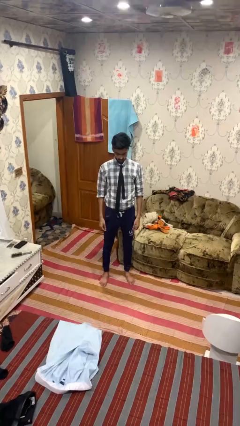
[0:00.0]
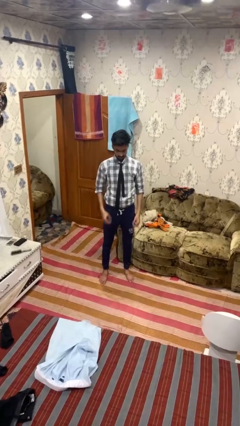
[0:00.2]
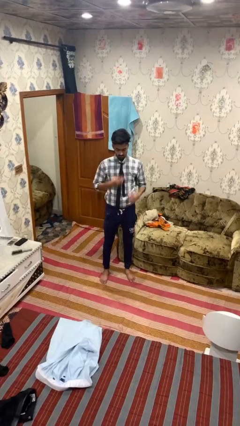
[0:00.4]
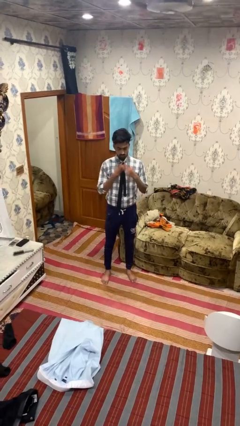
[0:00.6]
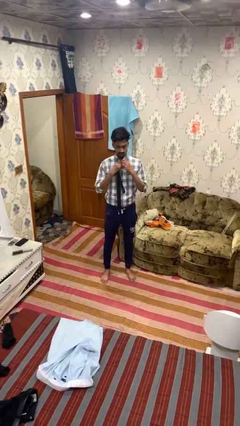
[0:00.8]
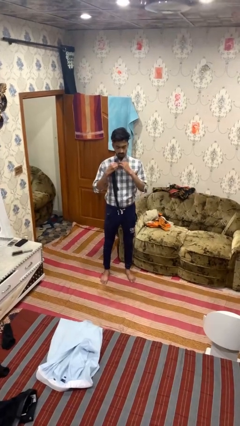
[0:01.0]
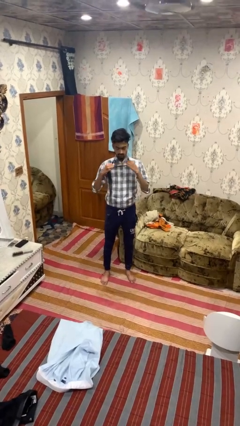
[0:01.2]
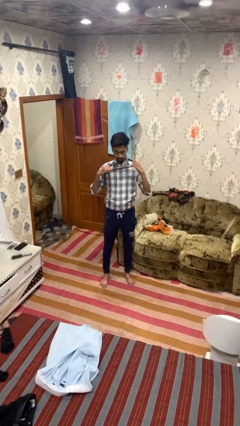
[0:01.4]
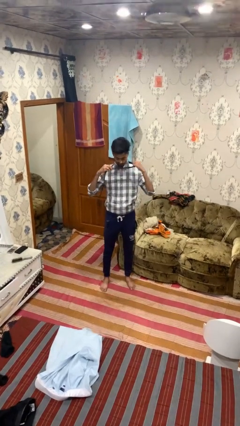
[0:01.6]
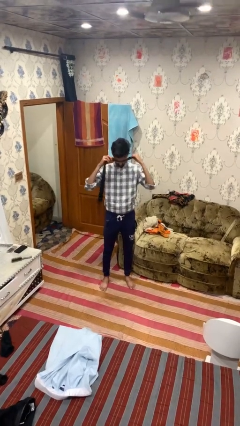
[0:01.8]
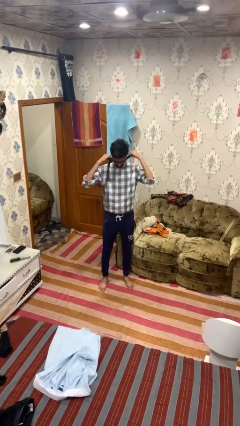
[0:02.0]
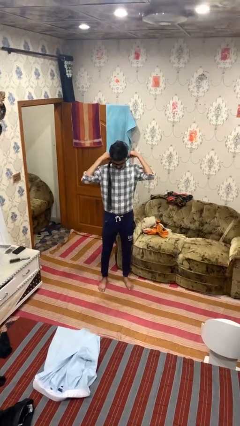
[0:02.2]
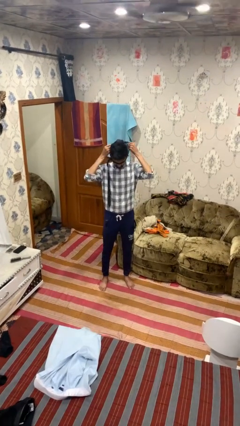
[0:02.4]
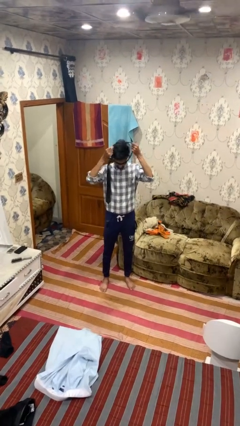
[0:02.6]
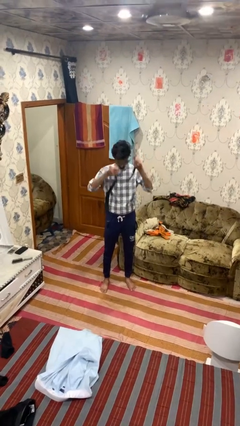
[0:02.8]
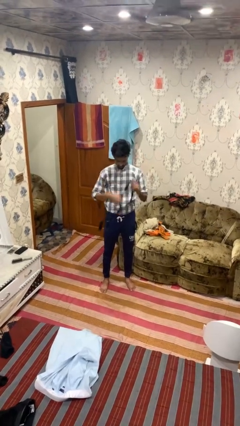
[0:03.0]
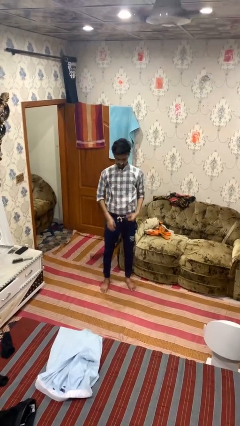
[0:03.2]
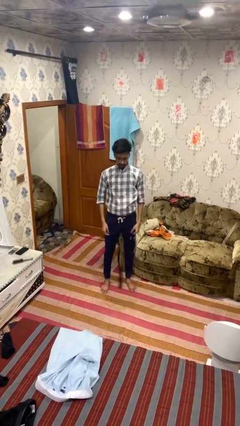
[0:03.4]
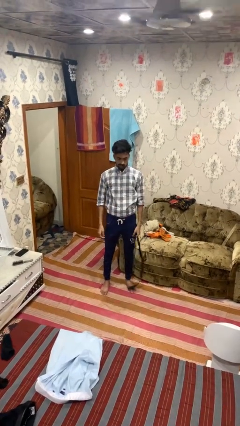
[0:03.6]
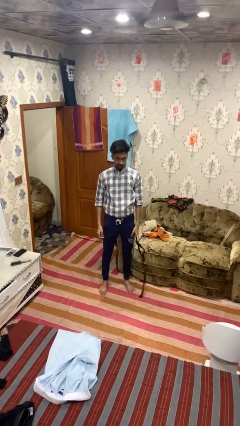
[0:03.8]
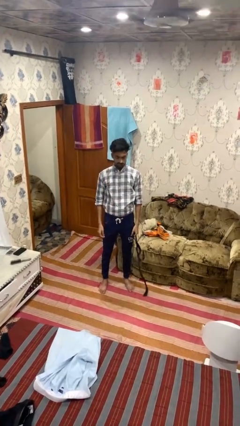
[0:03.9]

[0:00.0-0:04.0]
person takes off necktie

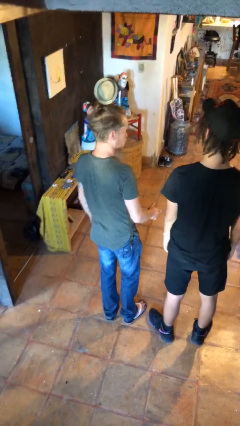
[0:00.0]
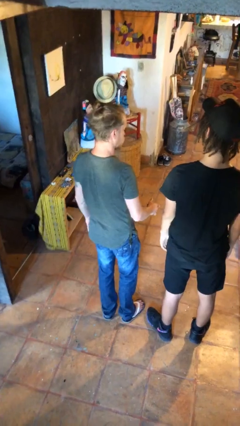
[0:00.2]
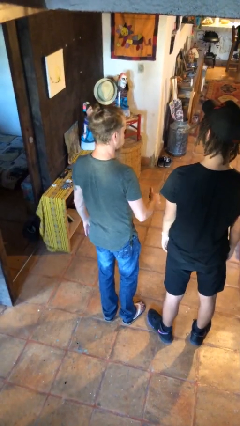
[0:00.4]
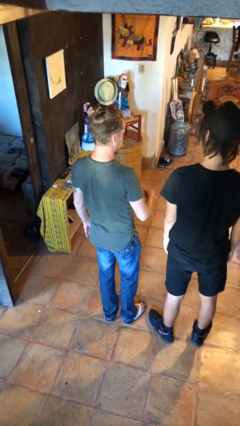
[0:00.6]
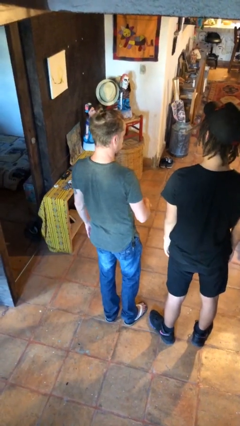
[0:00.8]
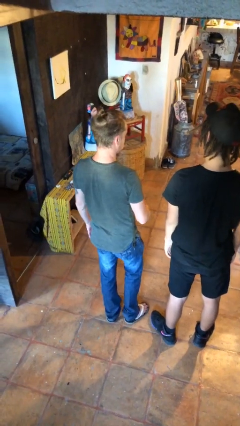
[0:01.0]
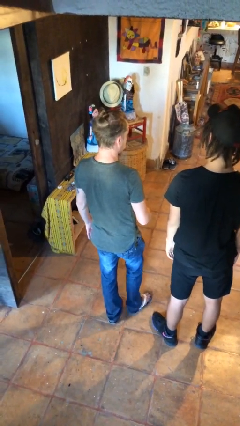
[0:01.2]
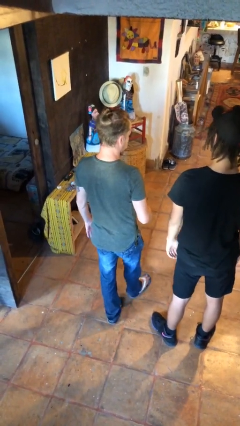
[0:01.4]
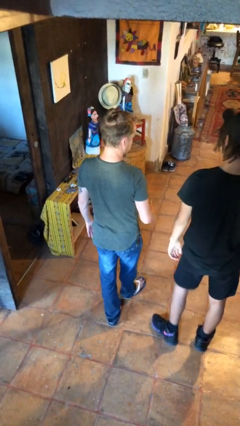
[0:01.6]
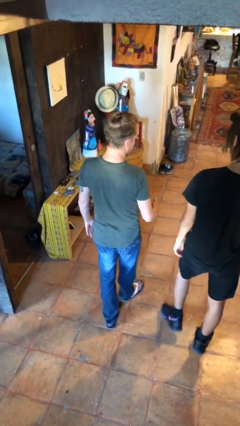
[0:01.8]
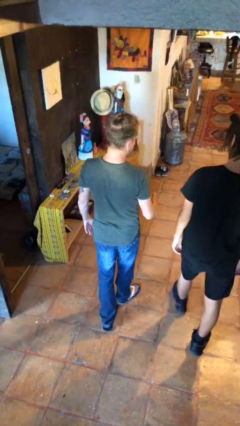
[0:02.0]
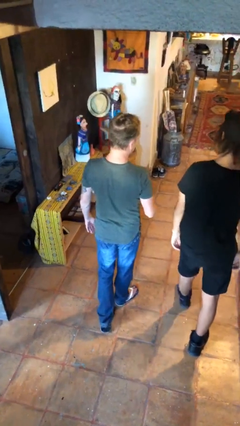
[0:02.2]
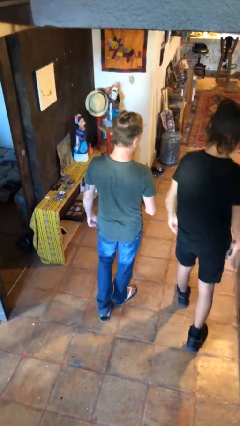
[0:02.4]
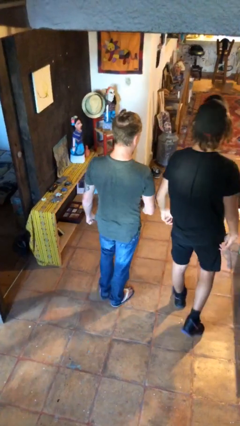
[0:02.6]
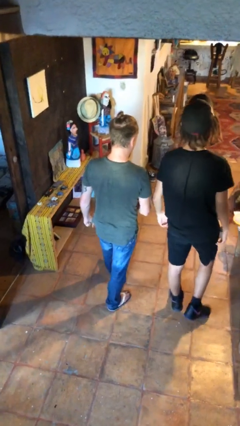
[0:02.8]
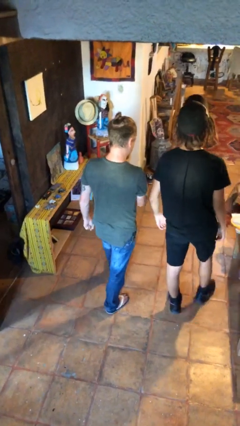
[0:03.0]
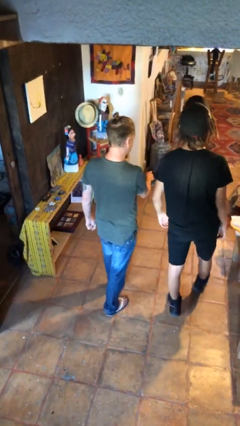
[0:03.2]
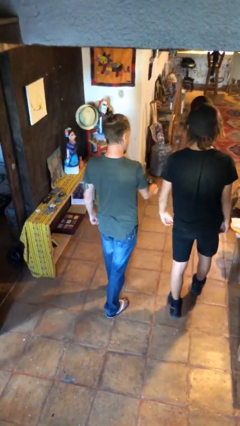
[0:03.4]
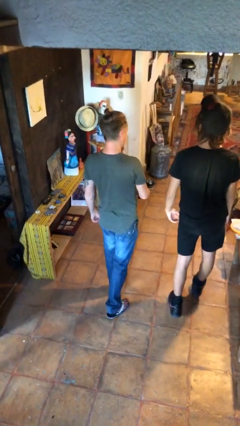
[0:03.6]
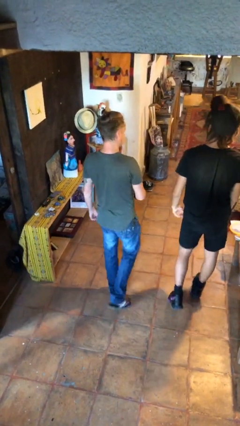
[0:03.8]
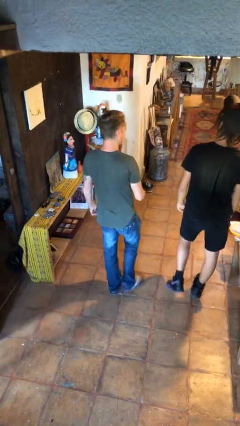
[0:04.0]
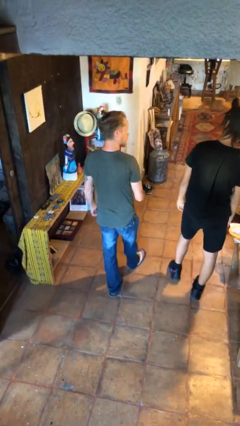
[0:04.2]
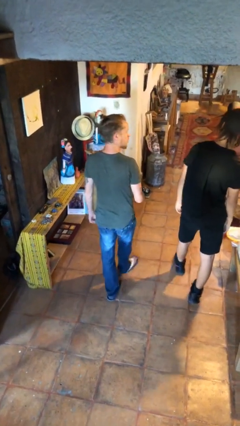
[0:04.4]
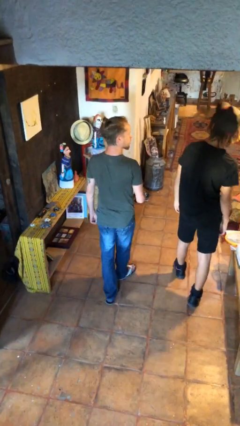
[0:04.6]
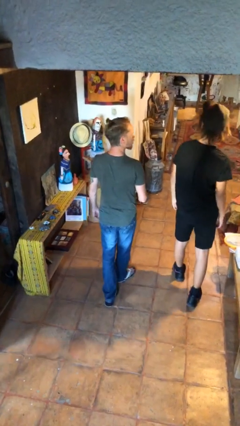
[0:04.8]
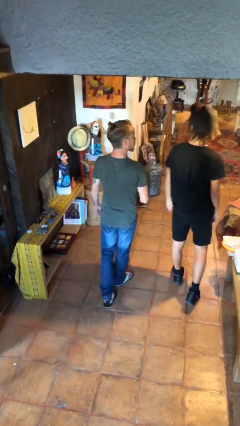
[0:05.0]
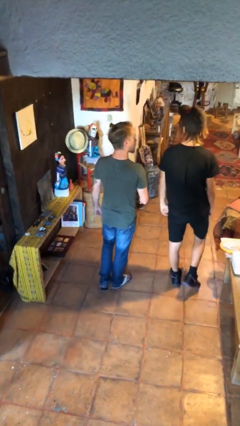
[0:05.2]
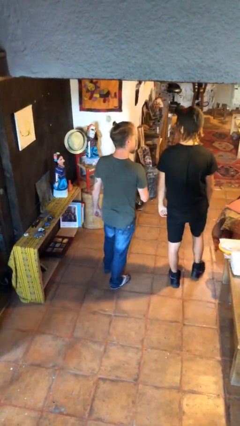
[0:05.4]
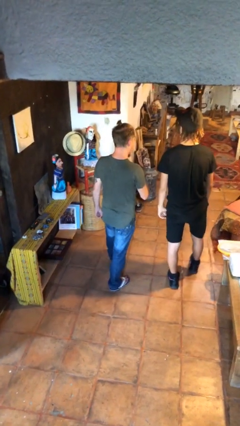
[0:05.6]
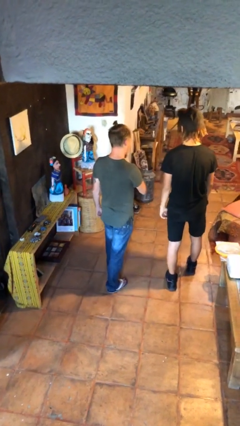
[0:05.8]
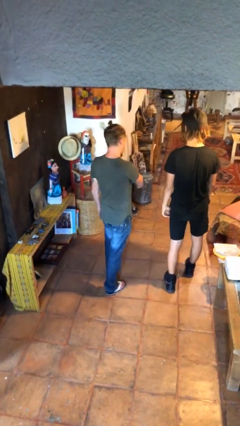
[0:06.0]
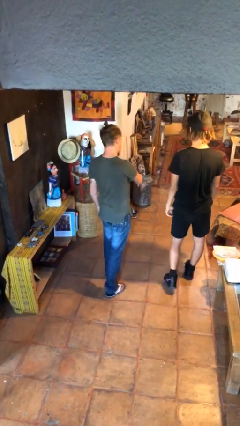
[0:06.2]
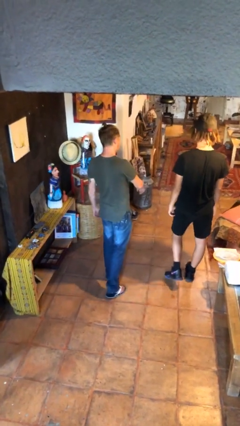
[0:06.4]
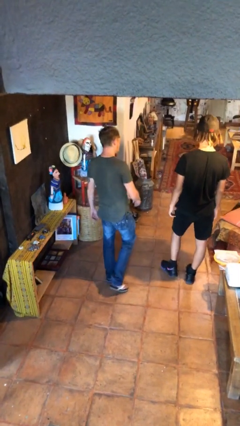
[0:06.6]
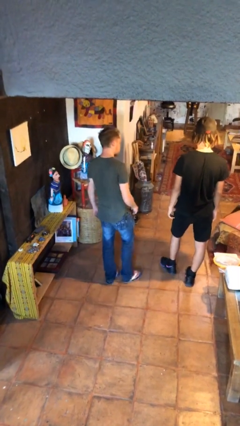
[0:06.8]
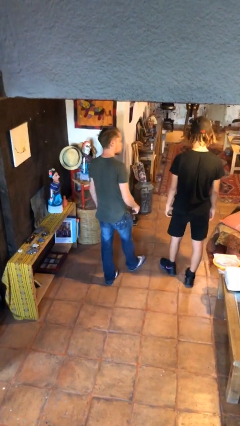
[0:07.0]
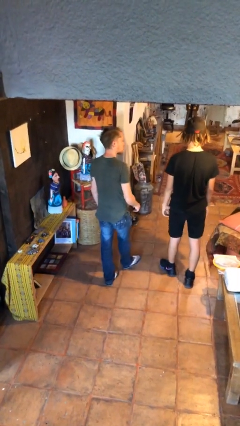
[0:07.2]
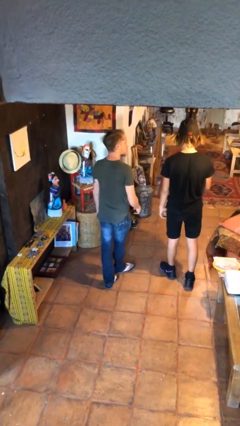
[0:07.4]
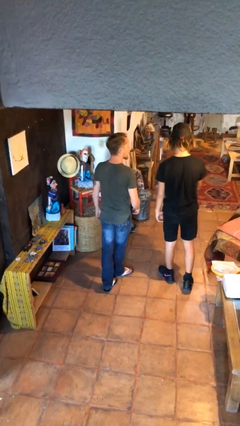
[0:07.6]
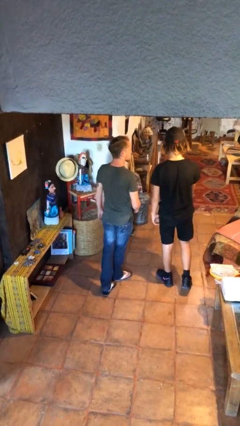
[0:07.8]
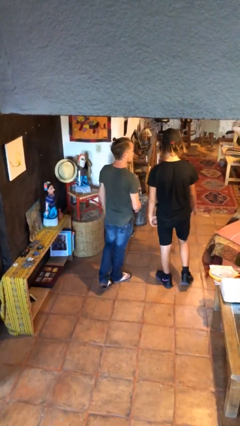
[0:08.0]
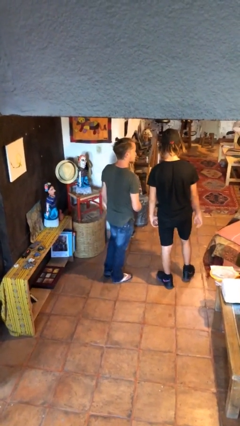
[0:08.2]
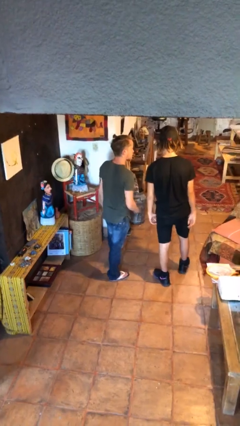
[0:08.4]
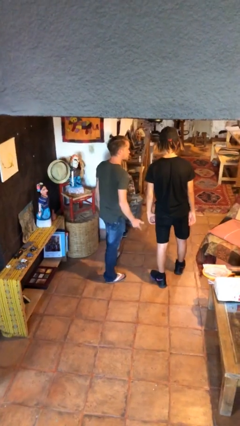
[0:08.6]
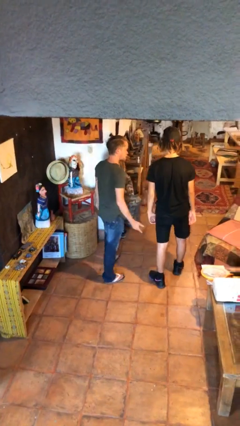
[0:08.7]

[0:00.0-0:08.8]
person talks to person

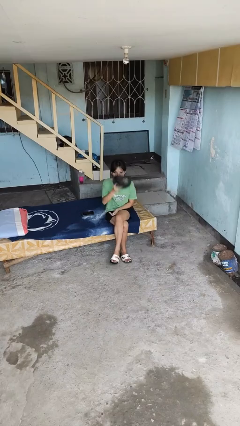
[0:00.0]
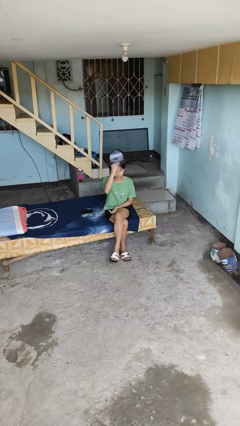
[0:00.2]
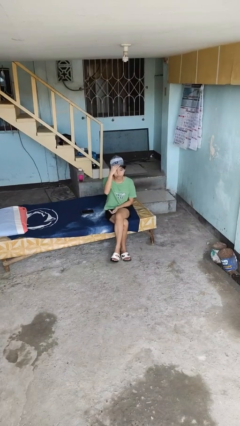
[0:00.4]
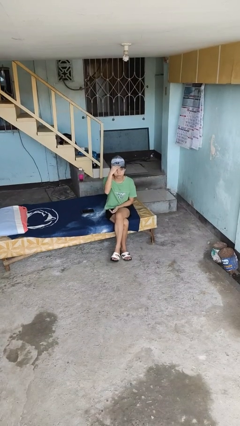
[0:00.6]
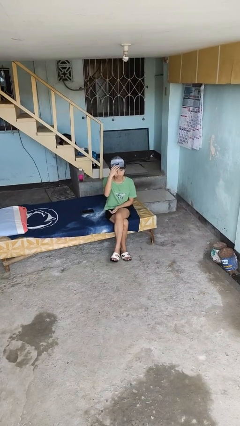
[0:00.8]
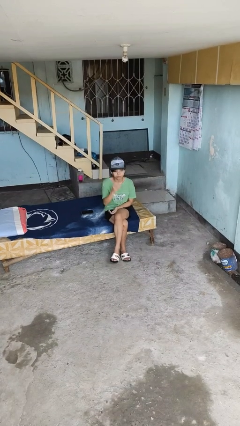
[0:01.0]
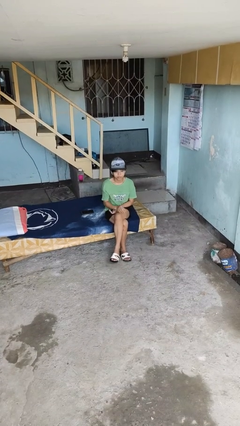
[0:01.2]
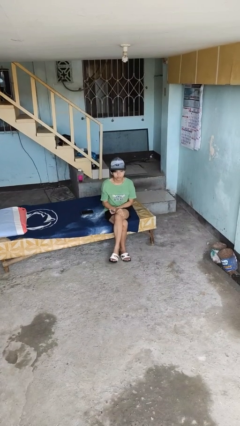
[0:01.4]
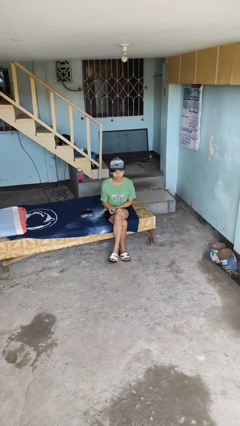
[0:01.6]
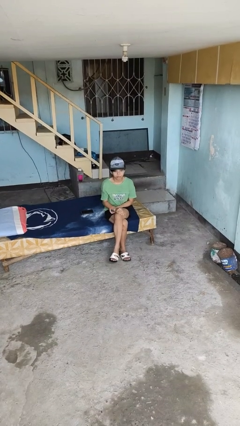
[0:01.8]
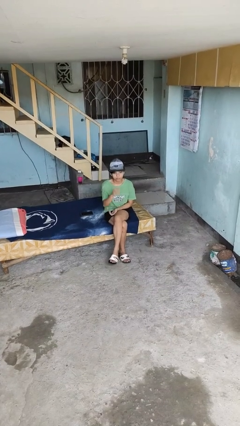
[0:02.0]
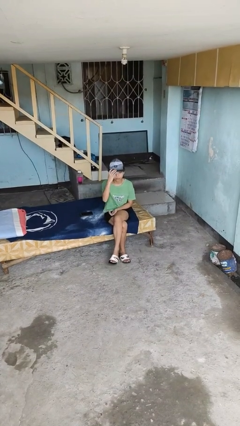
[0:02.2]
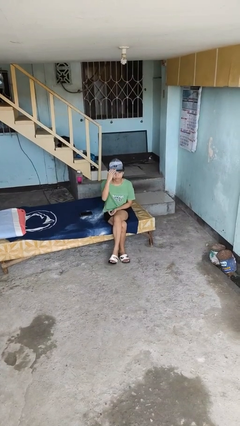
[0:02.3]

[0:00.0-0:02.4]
person puts on hat

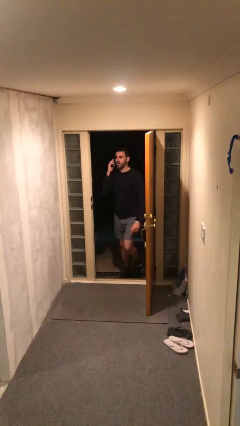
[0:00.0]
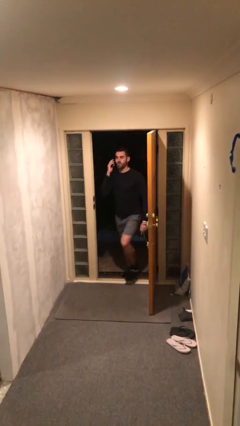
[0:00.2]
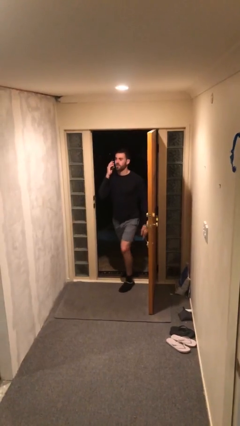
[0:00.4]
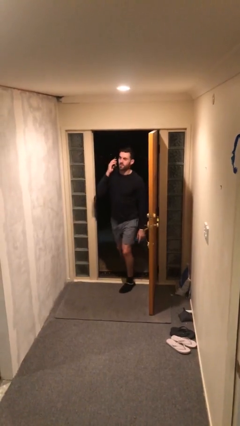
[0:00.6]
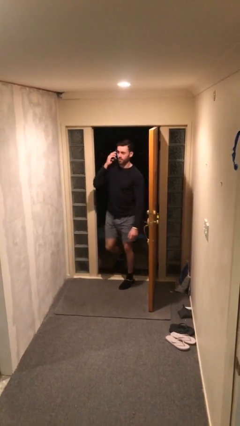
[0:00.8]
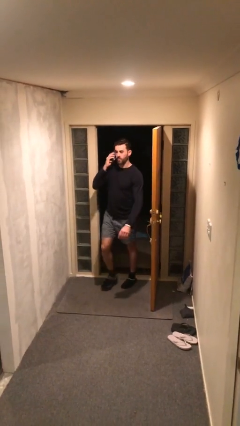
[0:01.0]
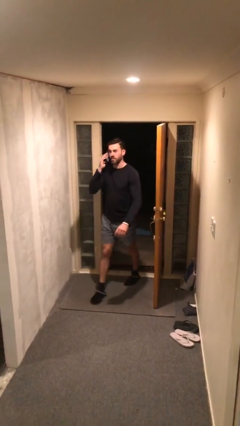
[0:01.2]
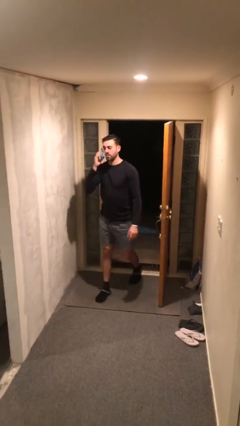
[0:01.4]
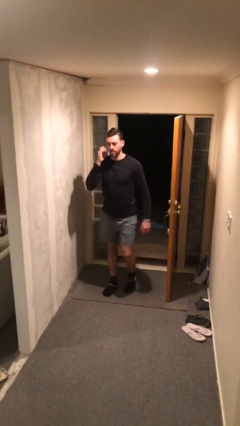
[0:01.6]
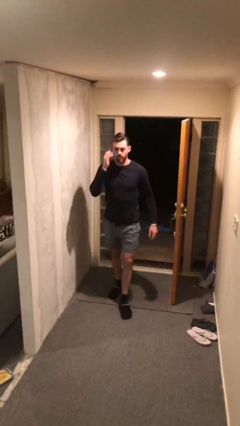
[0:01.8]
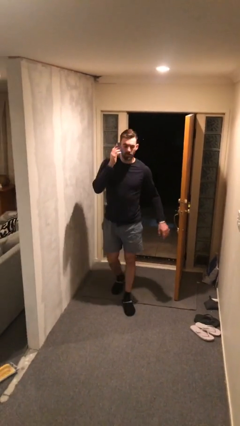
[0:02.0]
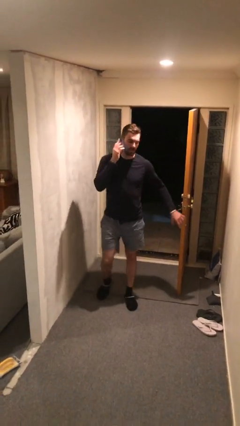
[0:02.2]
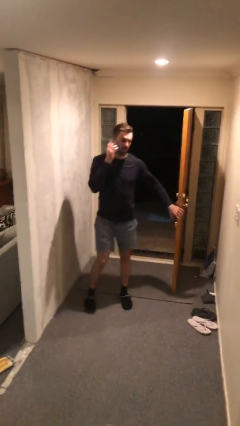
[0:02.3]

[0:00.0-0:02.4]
person enters scene through structure

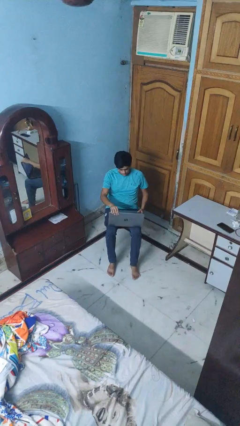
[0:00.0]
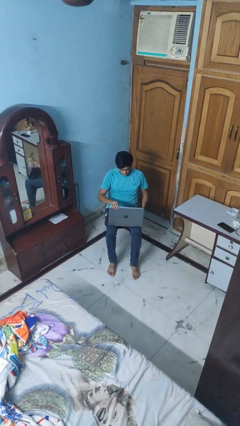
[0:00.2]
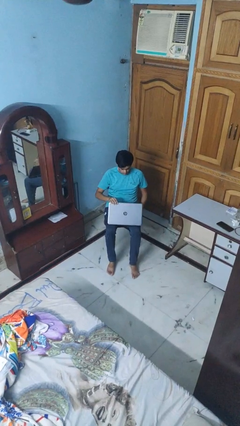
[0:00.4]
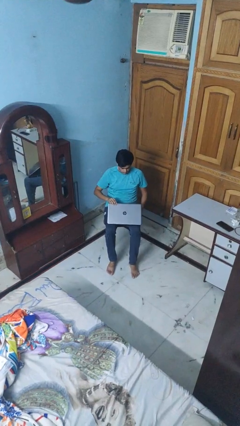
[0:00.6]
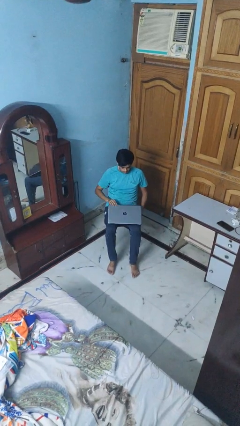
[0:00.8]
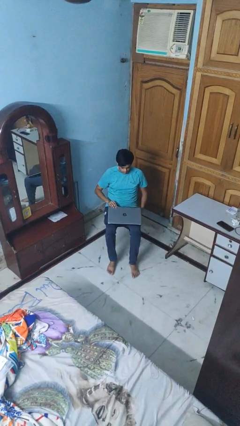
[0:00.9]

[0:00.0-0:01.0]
person closes laptop
